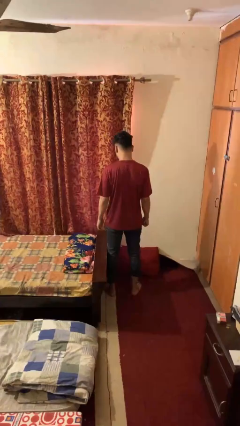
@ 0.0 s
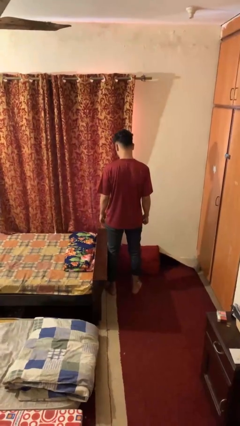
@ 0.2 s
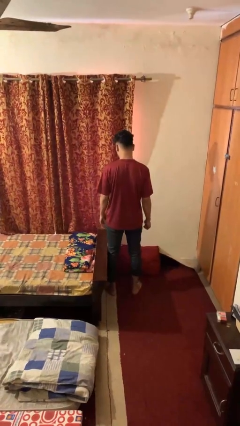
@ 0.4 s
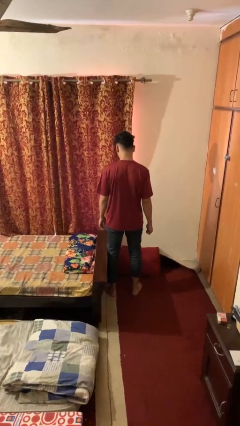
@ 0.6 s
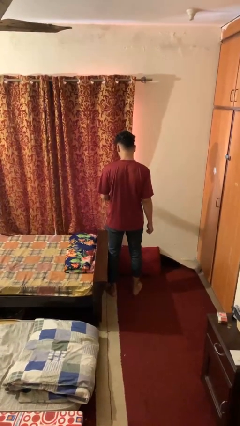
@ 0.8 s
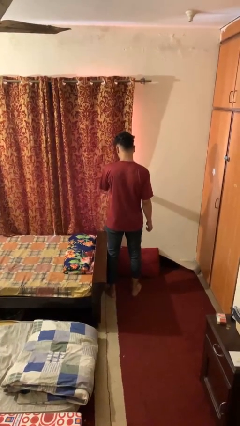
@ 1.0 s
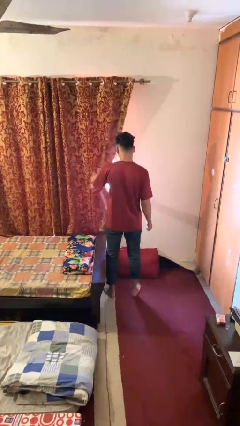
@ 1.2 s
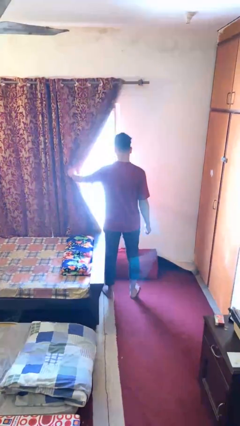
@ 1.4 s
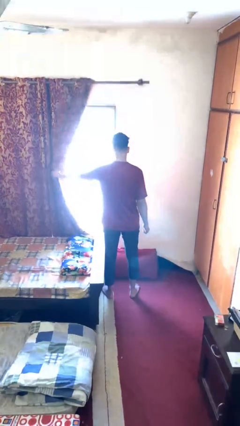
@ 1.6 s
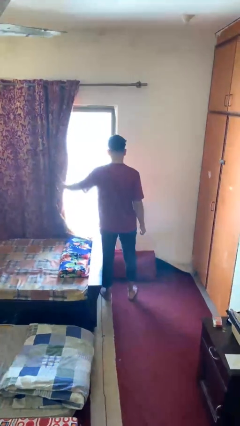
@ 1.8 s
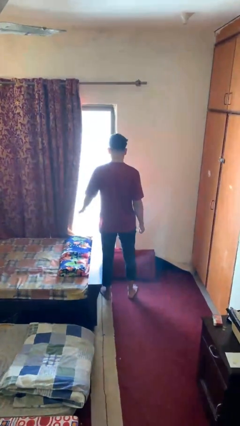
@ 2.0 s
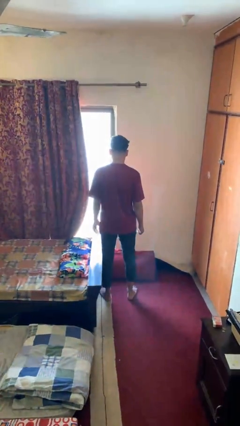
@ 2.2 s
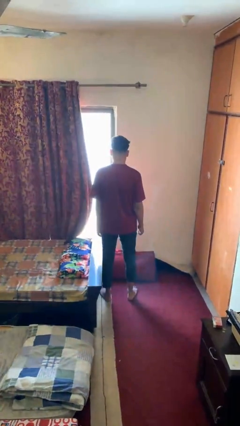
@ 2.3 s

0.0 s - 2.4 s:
person opens curtains

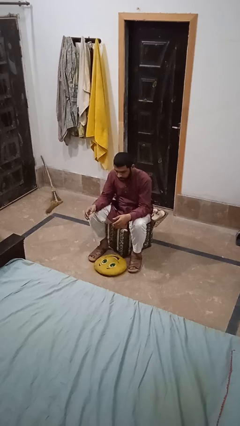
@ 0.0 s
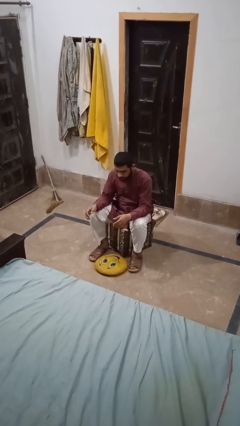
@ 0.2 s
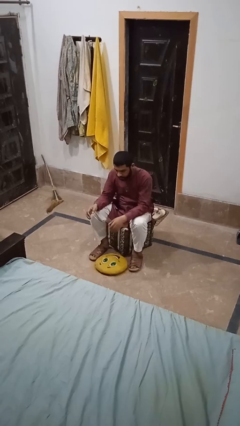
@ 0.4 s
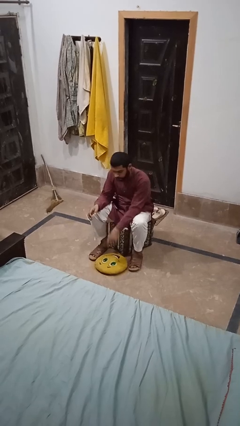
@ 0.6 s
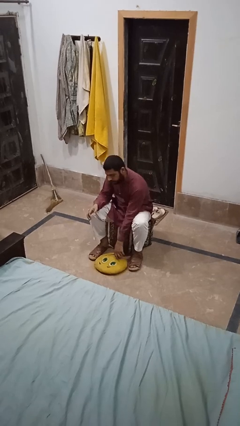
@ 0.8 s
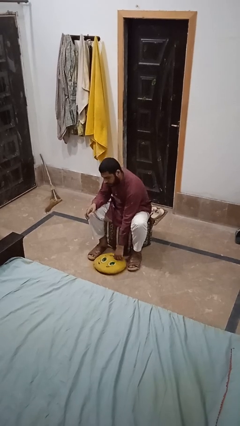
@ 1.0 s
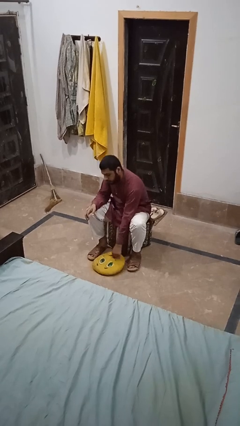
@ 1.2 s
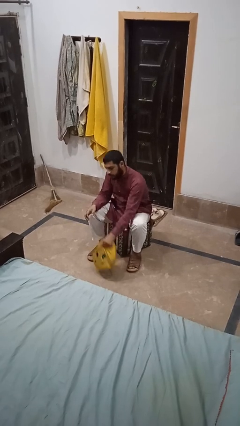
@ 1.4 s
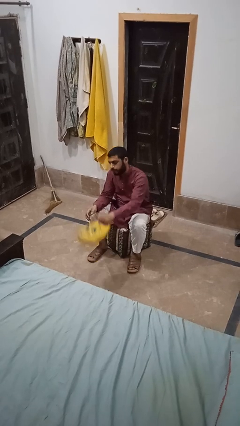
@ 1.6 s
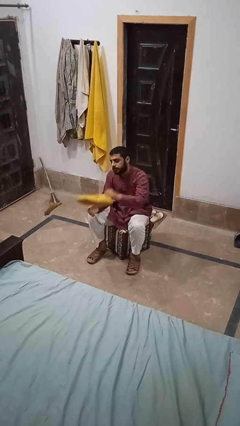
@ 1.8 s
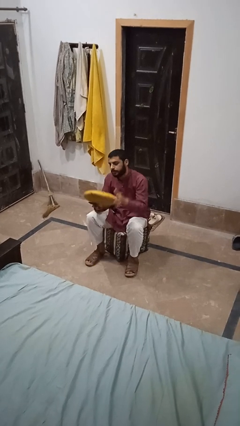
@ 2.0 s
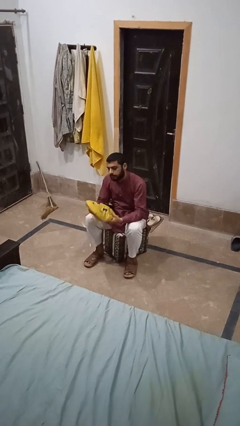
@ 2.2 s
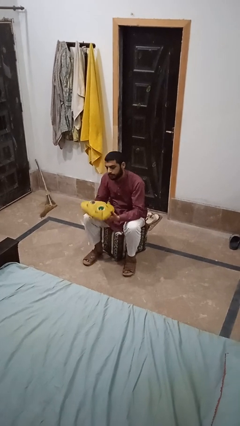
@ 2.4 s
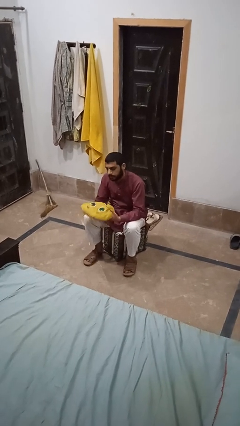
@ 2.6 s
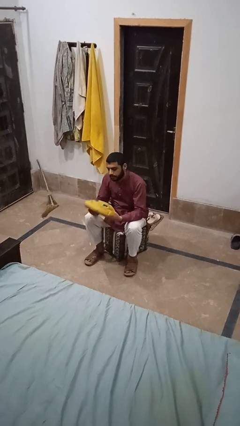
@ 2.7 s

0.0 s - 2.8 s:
person picks up object from floor

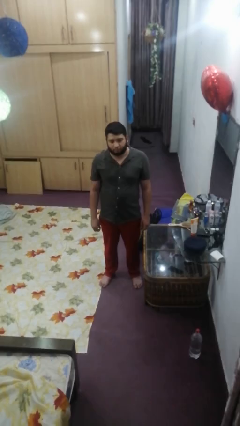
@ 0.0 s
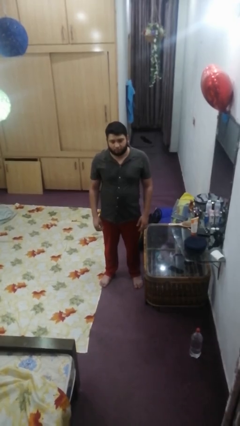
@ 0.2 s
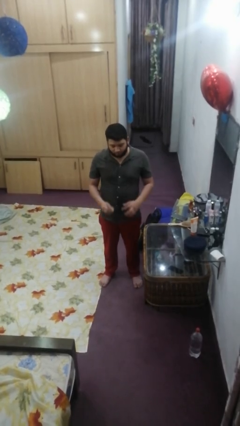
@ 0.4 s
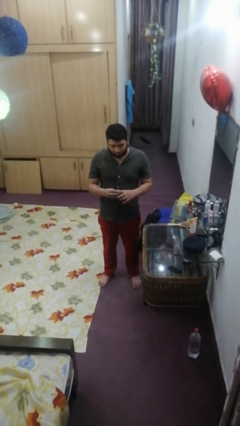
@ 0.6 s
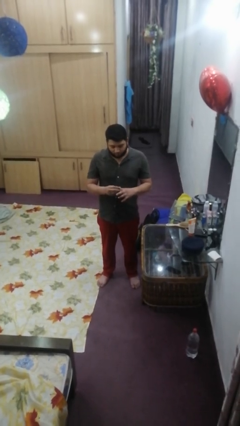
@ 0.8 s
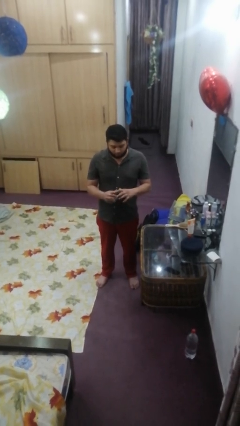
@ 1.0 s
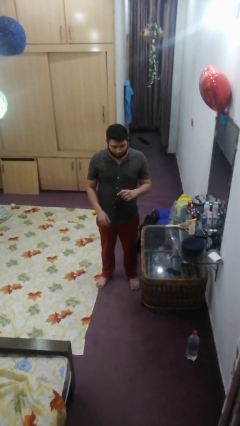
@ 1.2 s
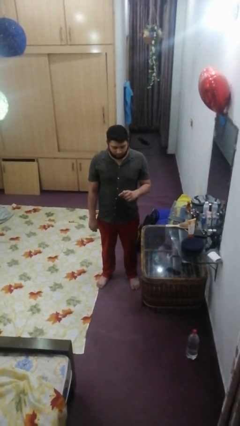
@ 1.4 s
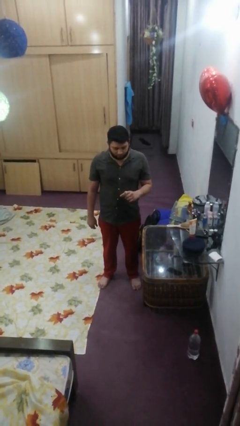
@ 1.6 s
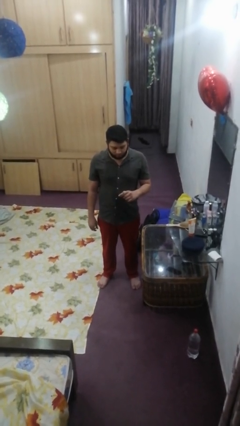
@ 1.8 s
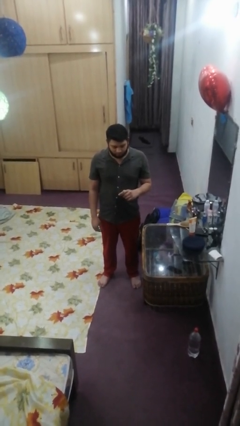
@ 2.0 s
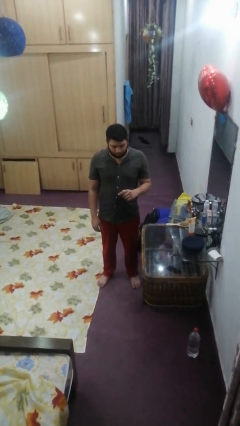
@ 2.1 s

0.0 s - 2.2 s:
person puts on ring

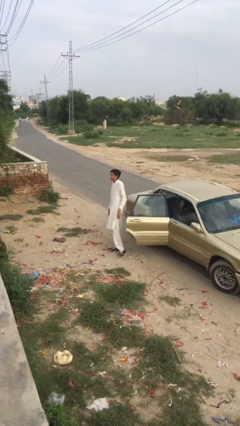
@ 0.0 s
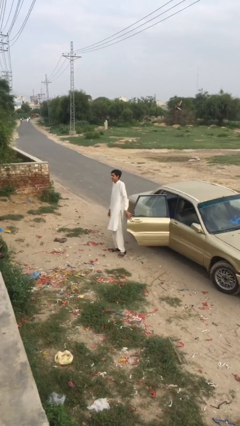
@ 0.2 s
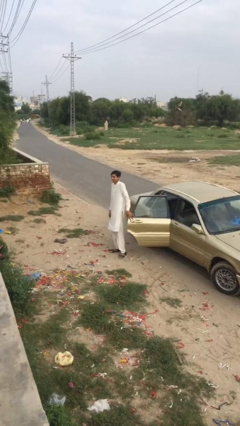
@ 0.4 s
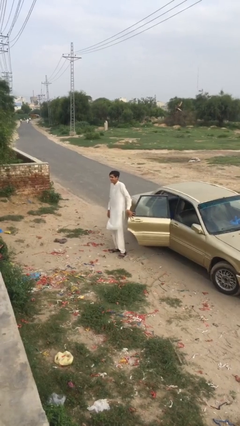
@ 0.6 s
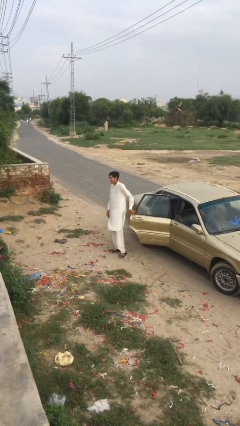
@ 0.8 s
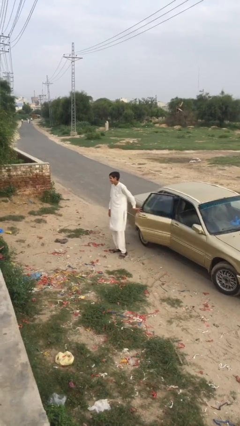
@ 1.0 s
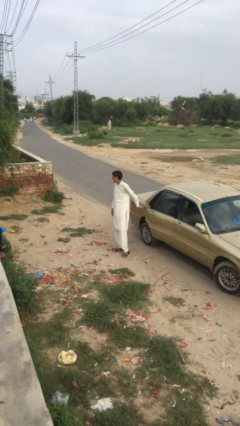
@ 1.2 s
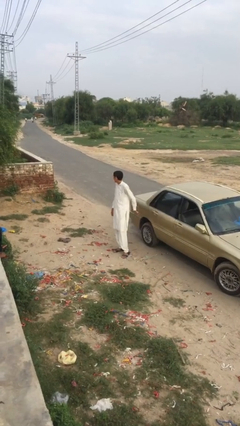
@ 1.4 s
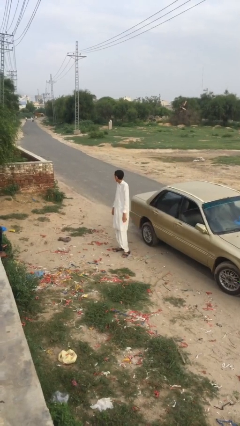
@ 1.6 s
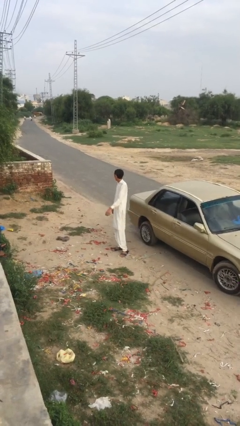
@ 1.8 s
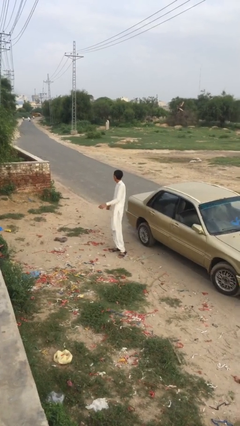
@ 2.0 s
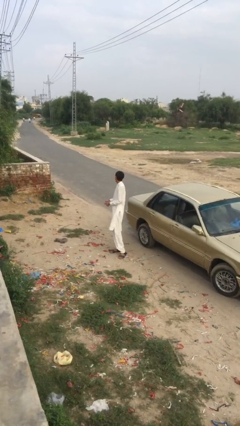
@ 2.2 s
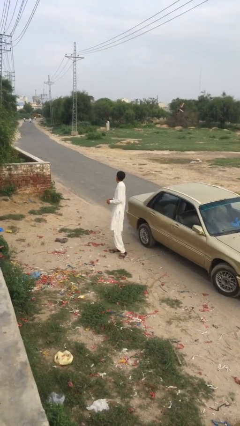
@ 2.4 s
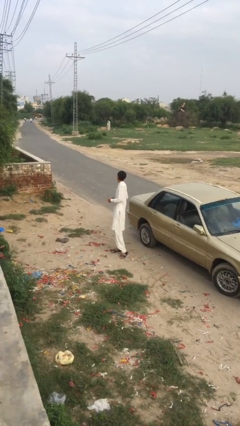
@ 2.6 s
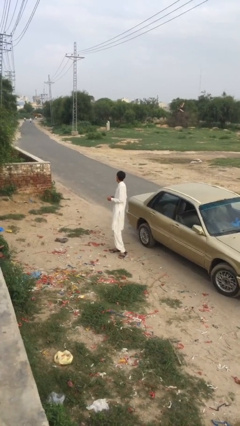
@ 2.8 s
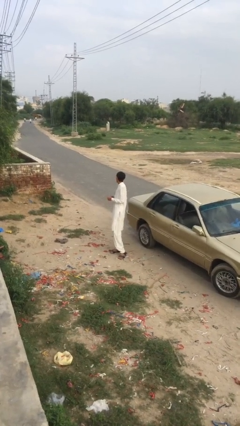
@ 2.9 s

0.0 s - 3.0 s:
person closes car door

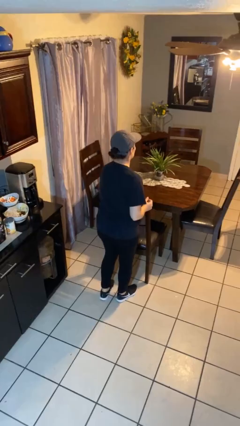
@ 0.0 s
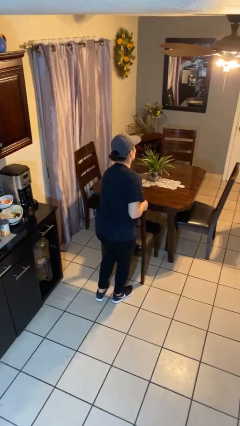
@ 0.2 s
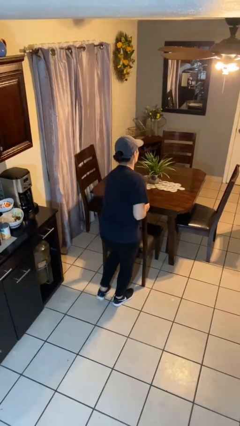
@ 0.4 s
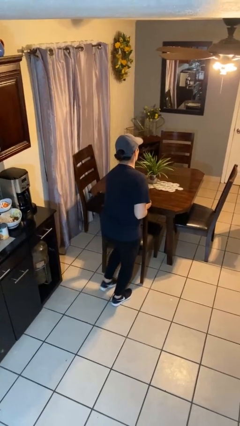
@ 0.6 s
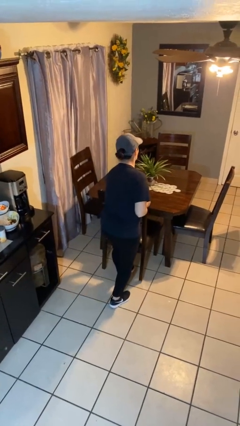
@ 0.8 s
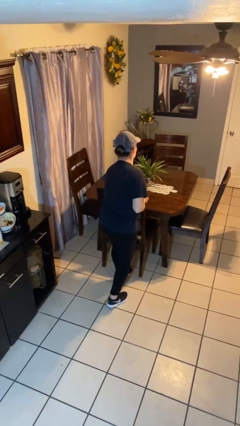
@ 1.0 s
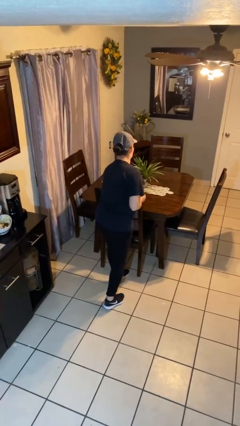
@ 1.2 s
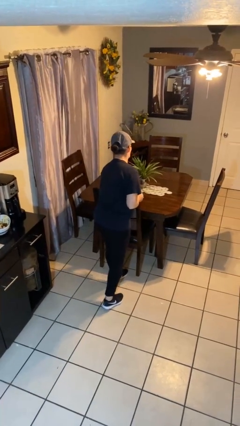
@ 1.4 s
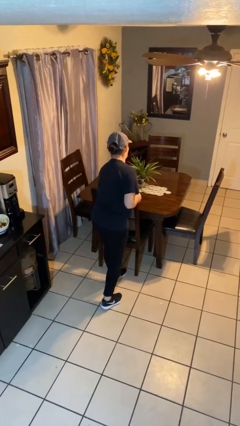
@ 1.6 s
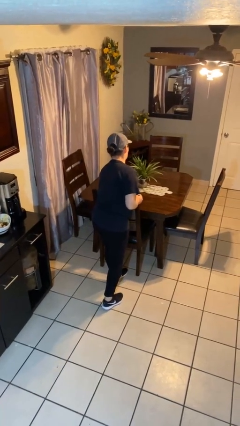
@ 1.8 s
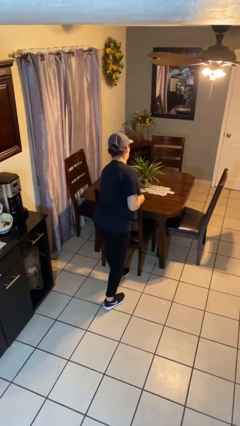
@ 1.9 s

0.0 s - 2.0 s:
person pushes in chair

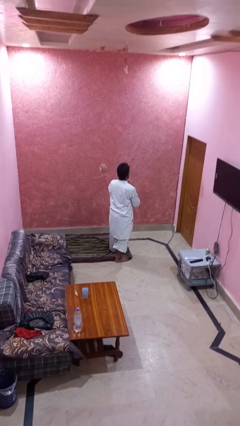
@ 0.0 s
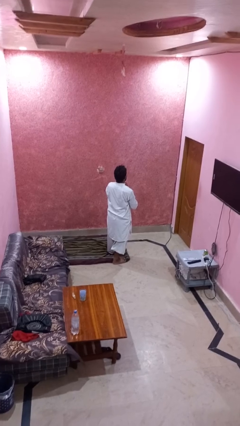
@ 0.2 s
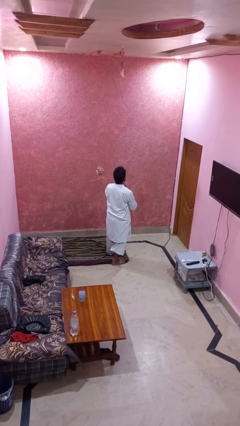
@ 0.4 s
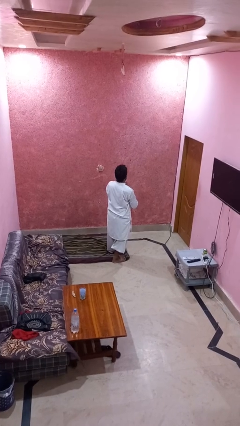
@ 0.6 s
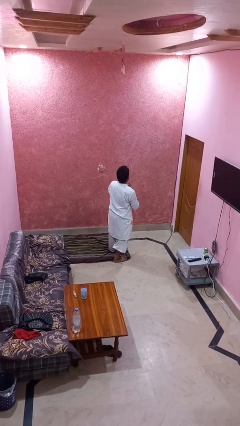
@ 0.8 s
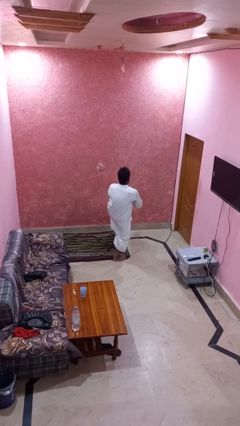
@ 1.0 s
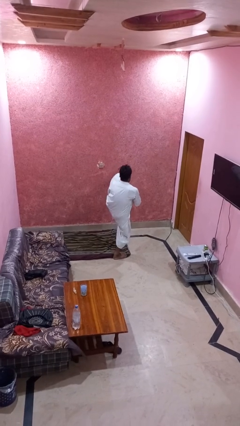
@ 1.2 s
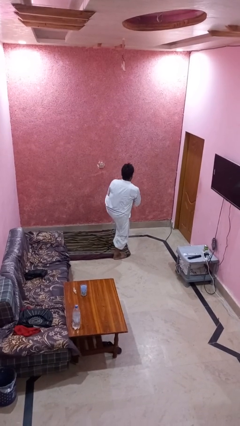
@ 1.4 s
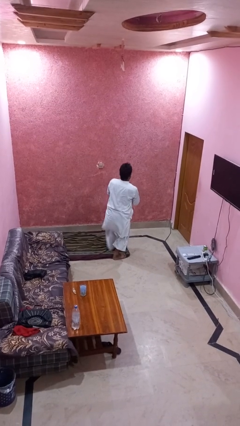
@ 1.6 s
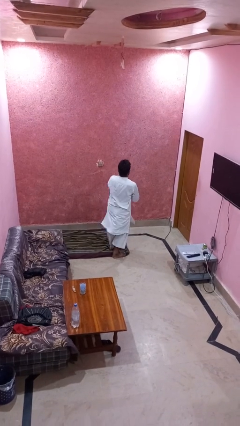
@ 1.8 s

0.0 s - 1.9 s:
person karate kicks

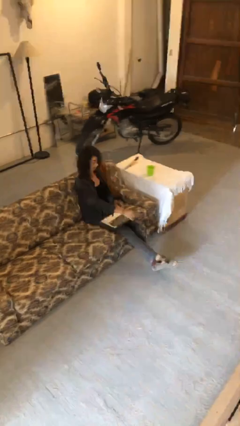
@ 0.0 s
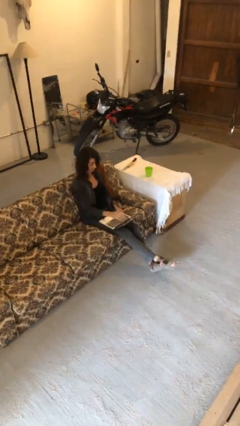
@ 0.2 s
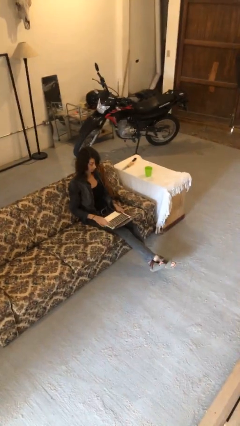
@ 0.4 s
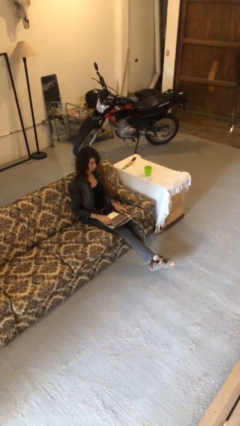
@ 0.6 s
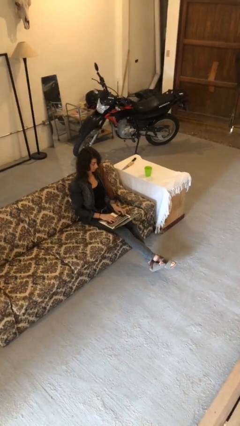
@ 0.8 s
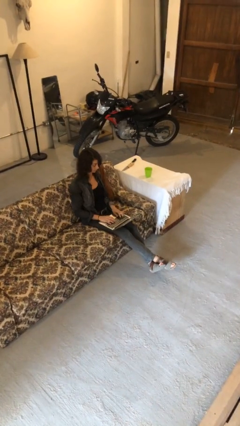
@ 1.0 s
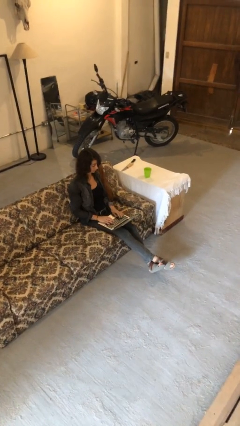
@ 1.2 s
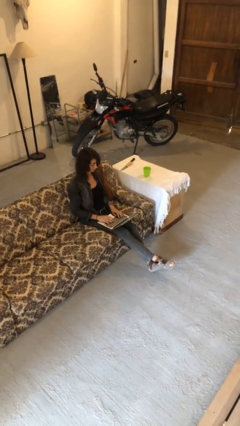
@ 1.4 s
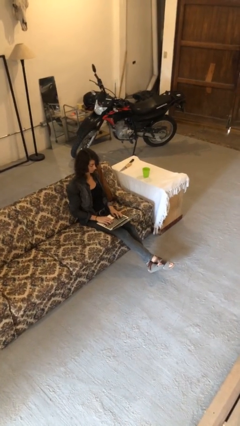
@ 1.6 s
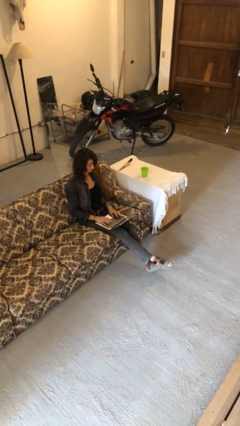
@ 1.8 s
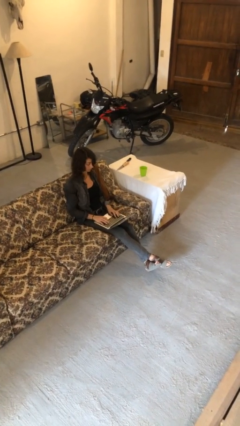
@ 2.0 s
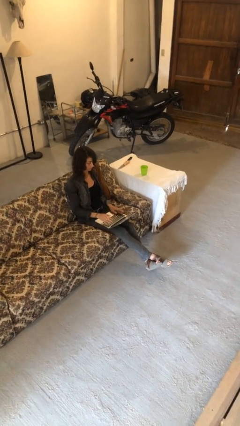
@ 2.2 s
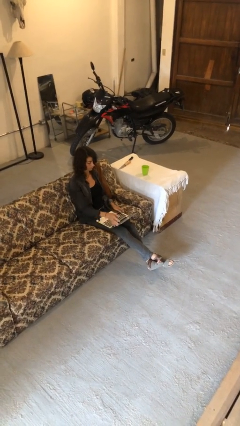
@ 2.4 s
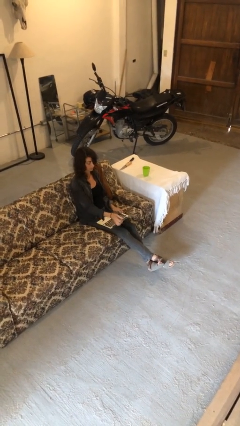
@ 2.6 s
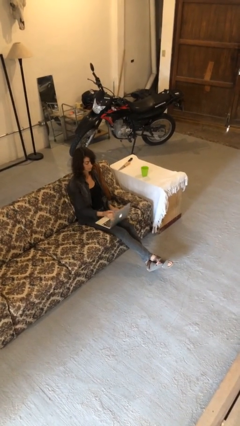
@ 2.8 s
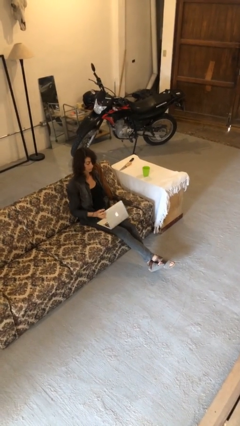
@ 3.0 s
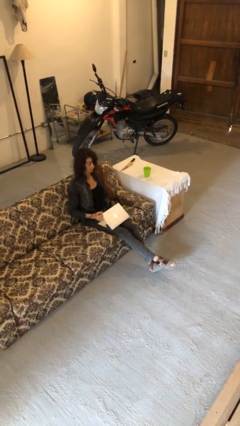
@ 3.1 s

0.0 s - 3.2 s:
person opens laptop
